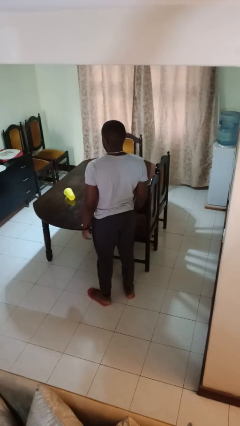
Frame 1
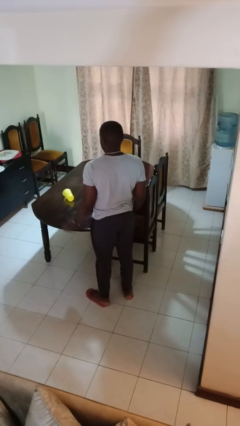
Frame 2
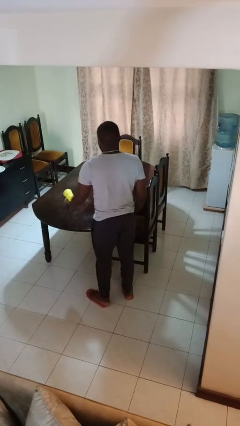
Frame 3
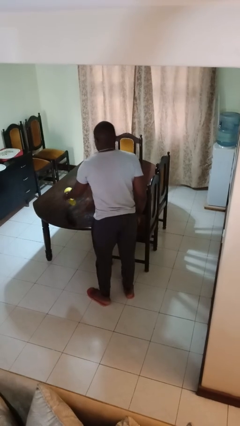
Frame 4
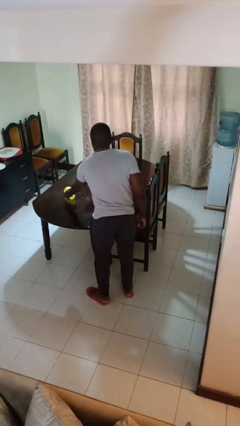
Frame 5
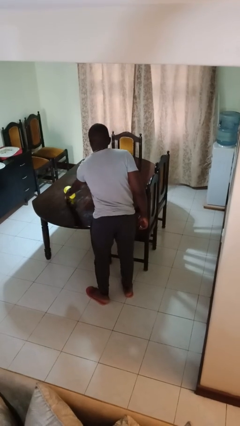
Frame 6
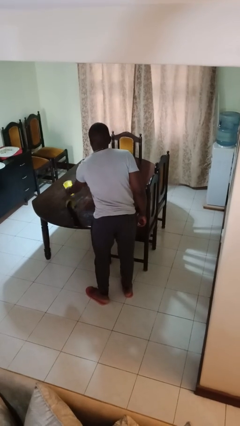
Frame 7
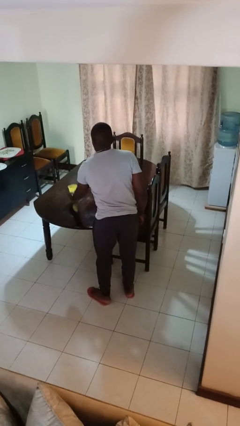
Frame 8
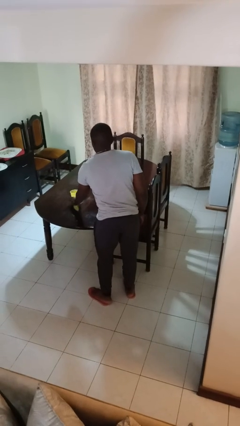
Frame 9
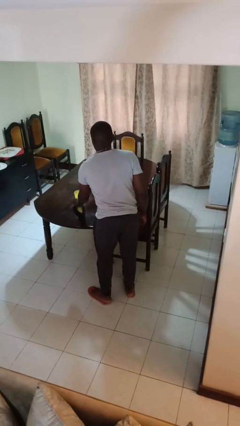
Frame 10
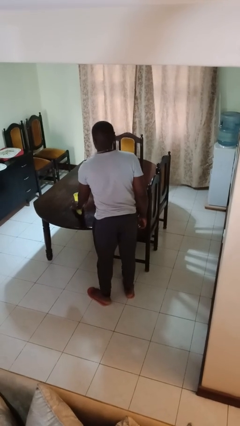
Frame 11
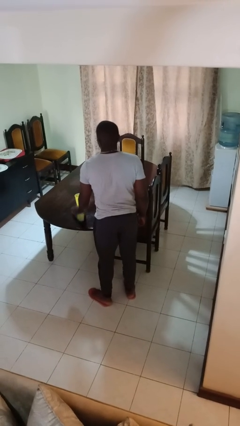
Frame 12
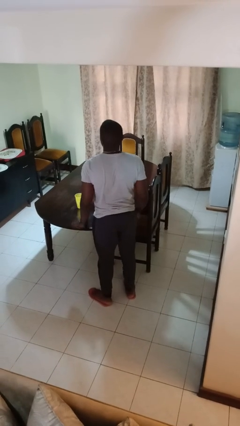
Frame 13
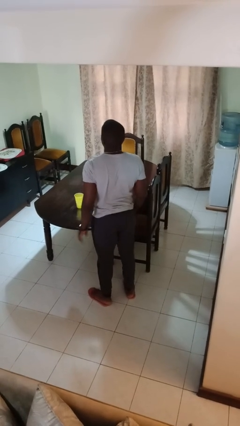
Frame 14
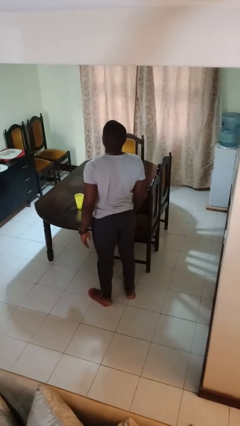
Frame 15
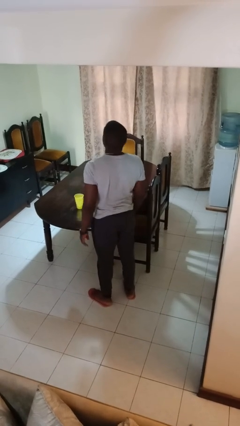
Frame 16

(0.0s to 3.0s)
person sets upright glass

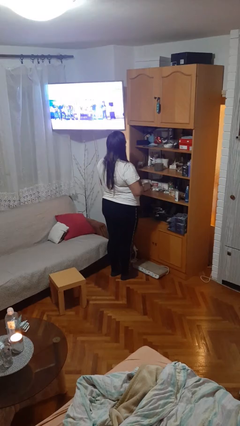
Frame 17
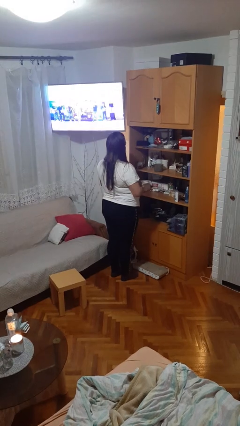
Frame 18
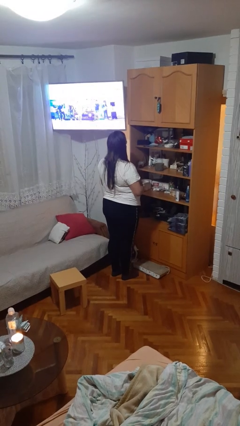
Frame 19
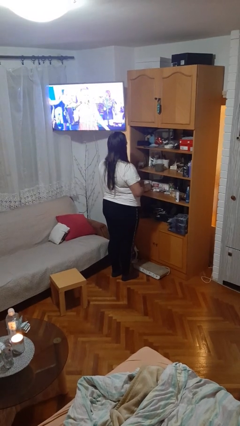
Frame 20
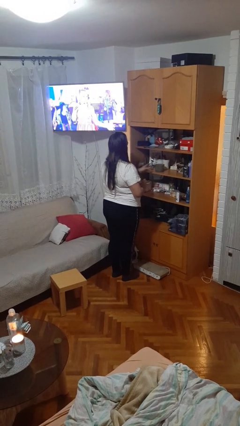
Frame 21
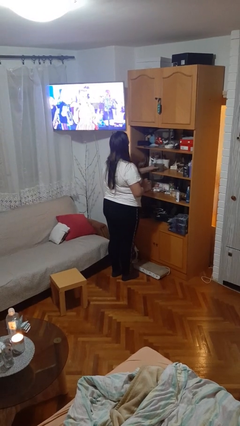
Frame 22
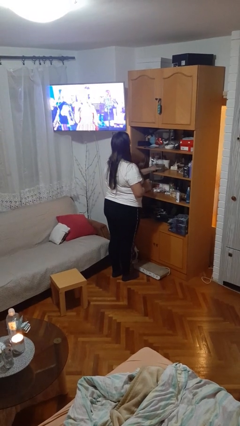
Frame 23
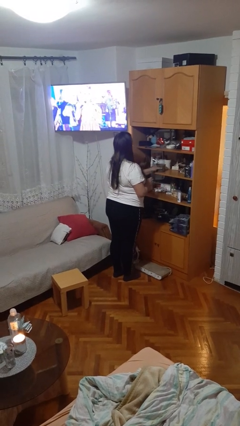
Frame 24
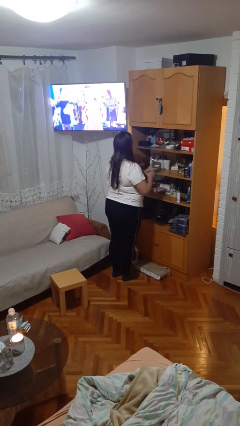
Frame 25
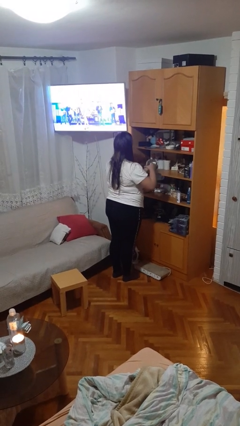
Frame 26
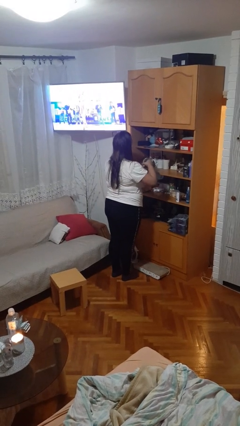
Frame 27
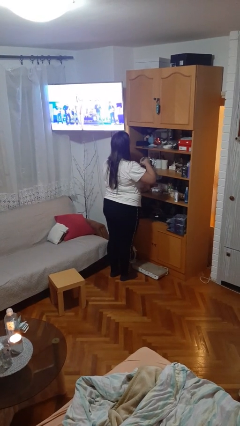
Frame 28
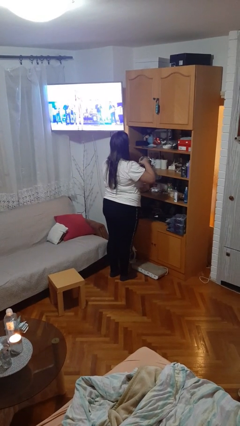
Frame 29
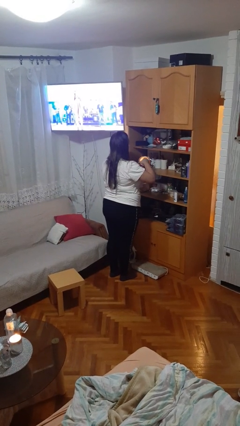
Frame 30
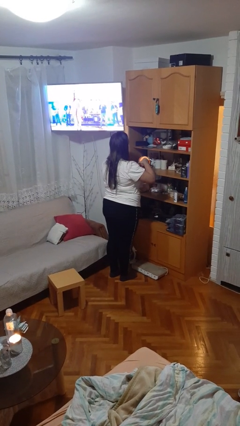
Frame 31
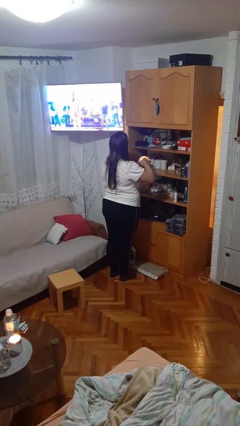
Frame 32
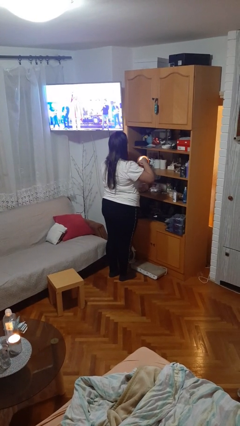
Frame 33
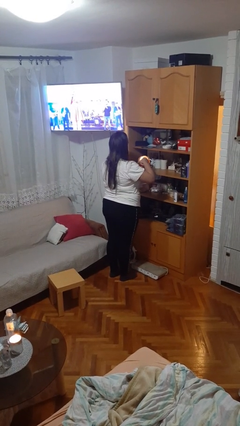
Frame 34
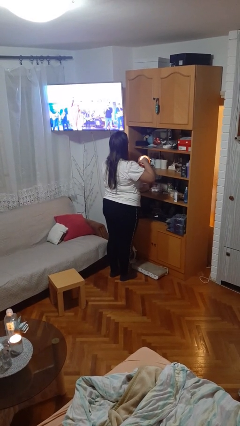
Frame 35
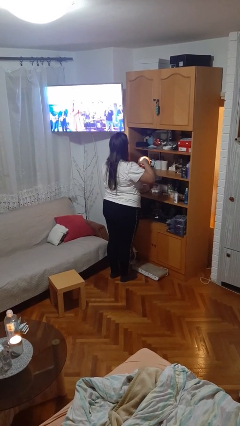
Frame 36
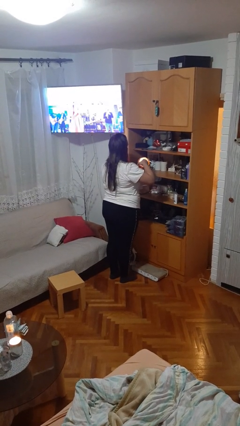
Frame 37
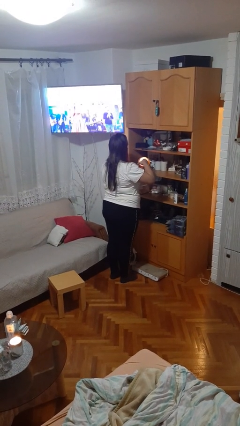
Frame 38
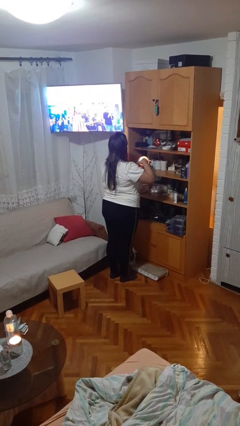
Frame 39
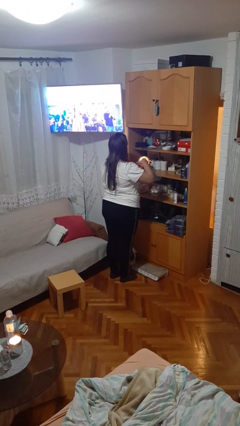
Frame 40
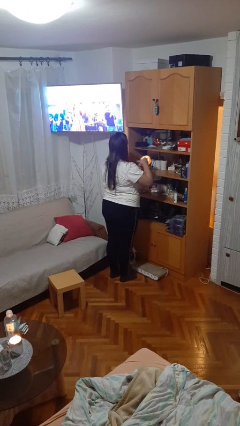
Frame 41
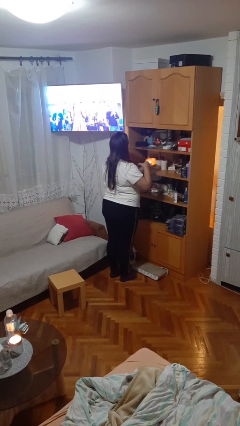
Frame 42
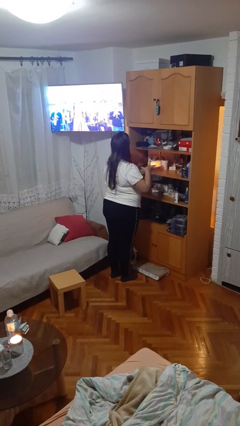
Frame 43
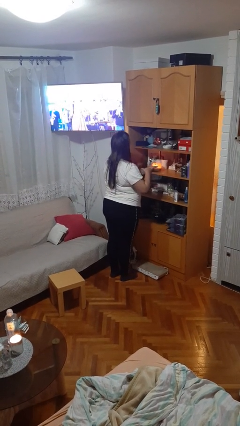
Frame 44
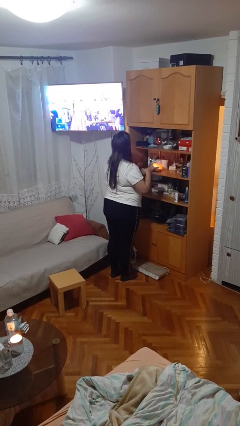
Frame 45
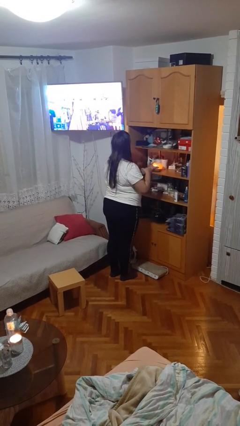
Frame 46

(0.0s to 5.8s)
person lights candle

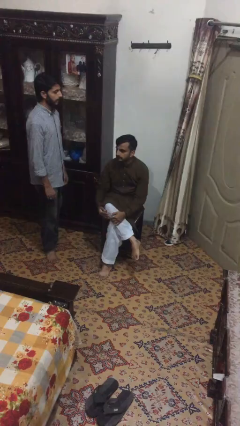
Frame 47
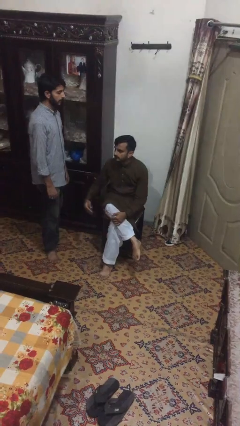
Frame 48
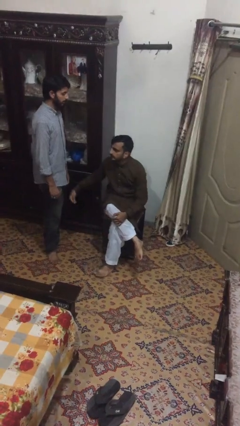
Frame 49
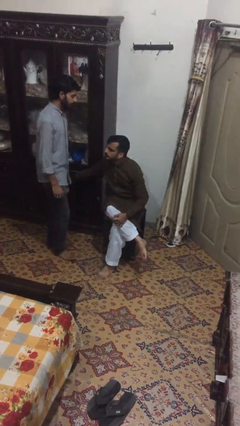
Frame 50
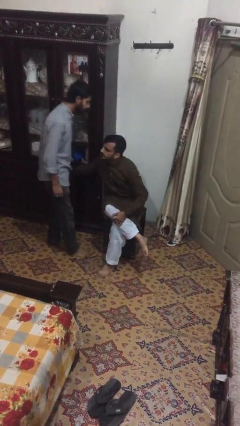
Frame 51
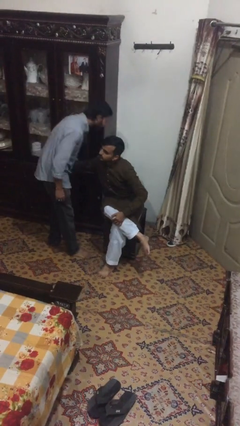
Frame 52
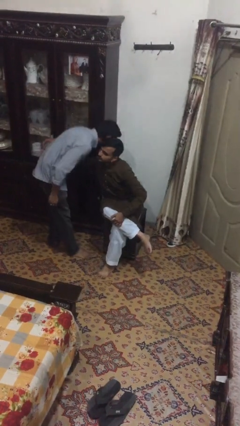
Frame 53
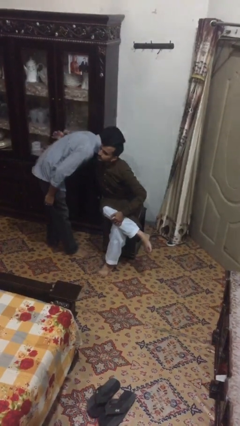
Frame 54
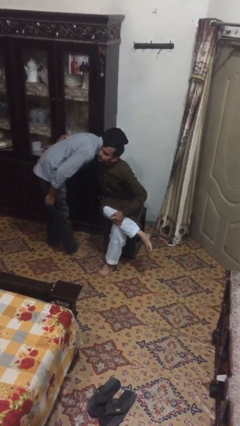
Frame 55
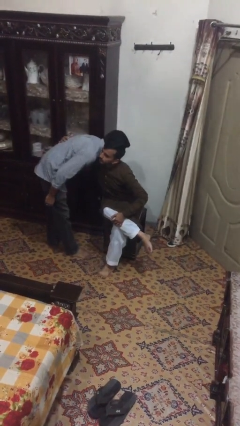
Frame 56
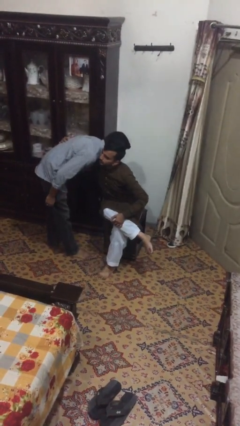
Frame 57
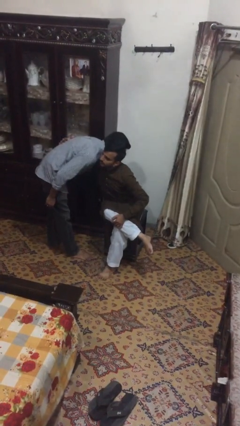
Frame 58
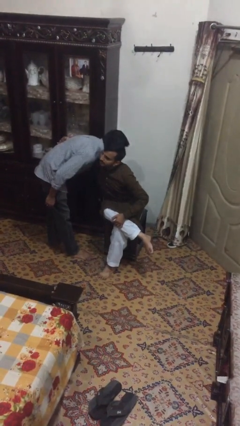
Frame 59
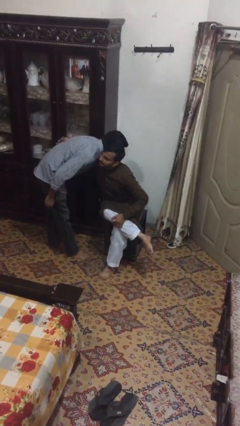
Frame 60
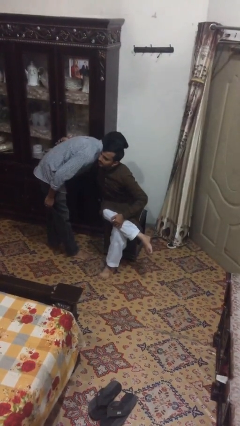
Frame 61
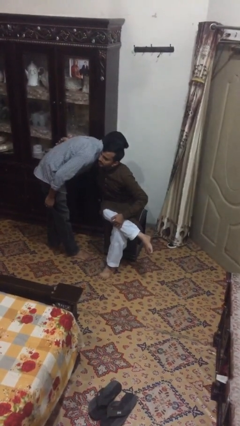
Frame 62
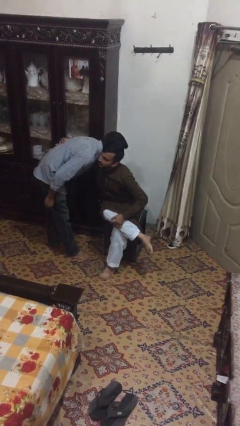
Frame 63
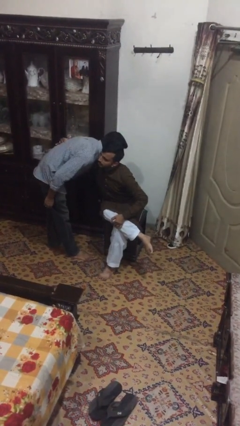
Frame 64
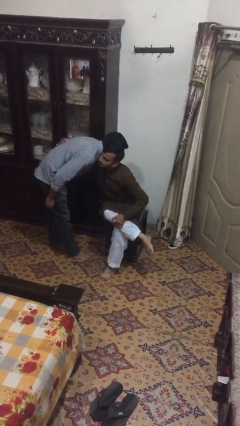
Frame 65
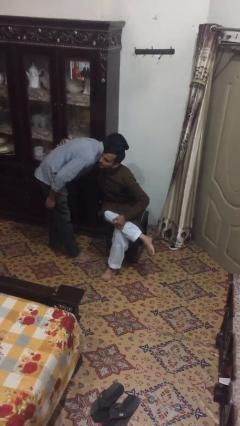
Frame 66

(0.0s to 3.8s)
person embraces person

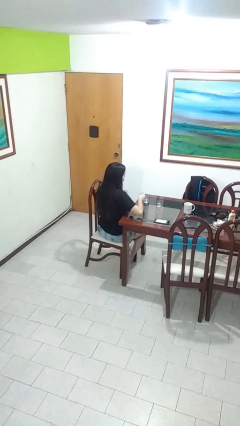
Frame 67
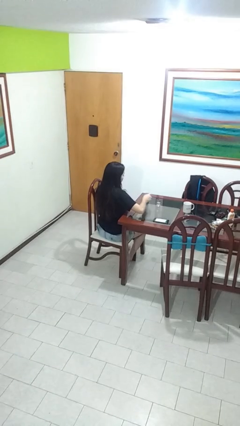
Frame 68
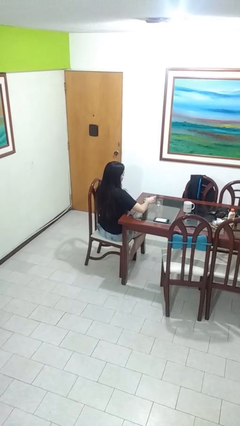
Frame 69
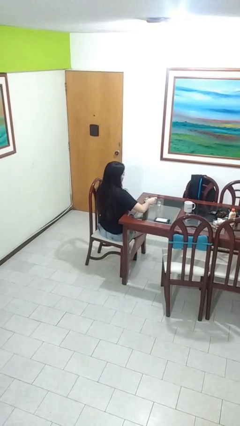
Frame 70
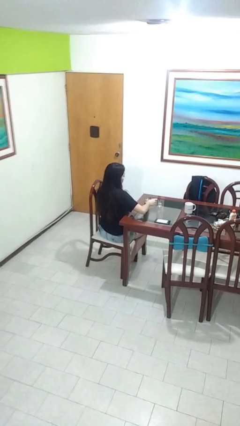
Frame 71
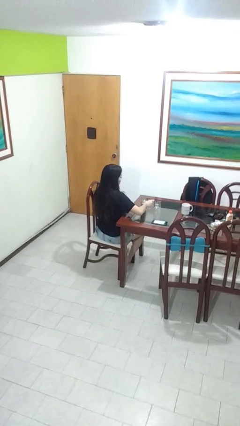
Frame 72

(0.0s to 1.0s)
person puts down object on table

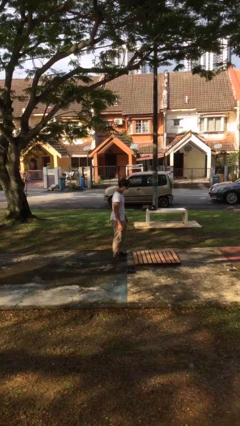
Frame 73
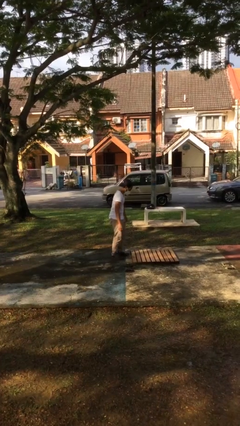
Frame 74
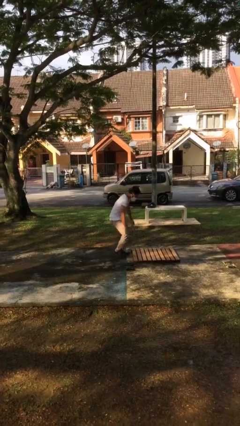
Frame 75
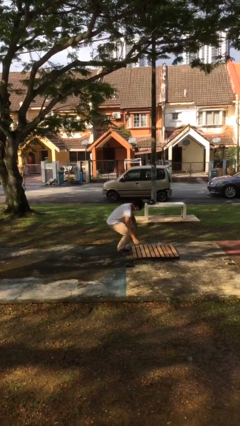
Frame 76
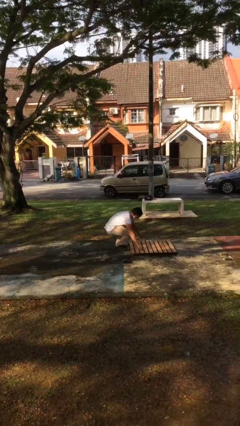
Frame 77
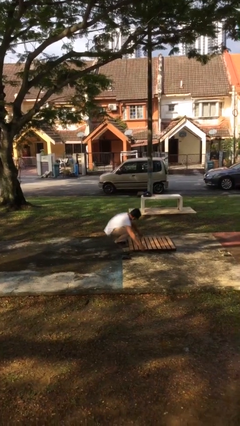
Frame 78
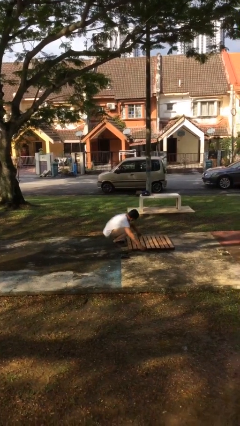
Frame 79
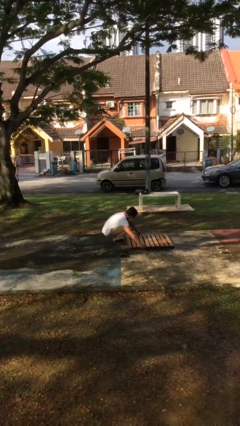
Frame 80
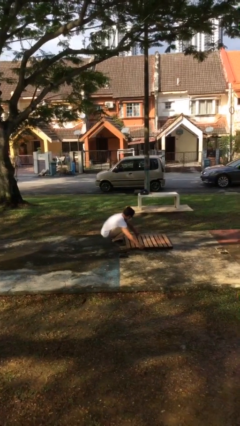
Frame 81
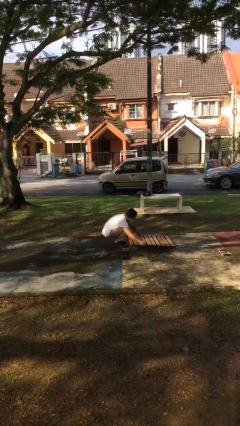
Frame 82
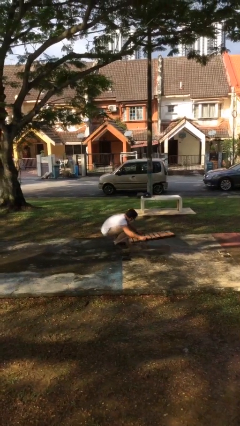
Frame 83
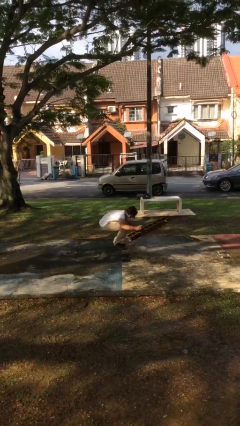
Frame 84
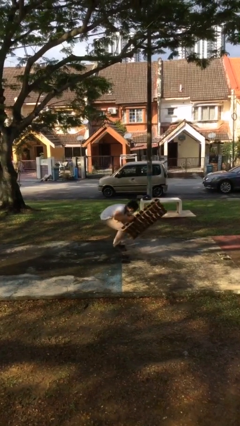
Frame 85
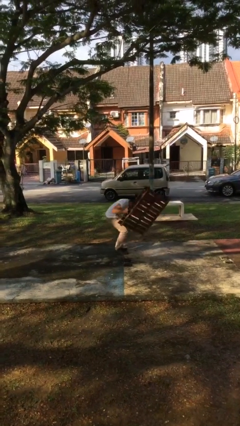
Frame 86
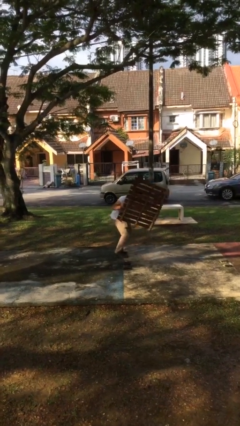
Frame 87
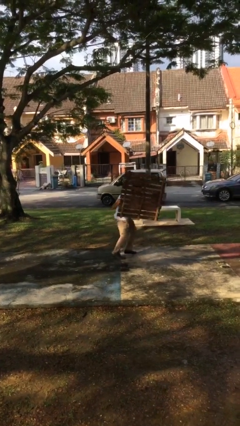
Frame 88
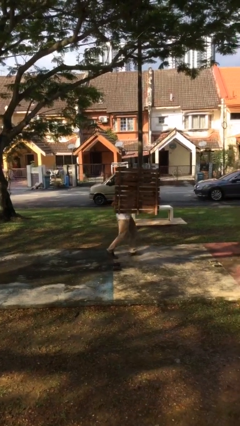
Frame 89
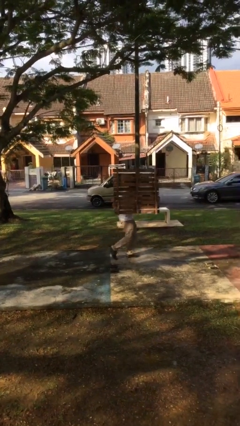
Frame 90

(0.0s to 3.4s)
person picks up object from floor

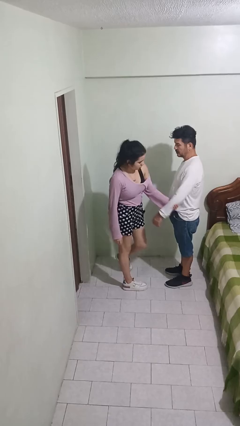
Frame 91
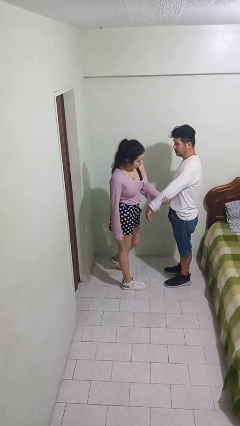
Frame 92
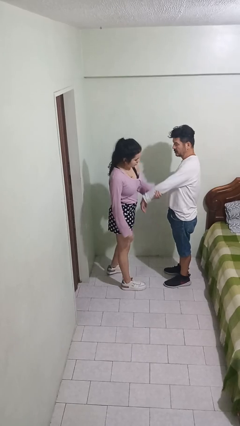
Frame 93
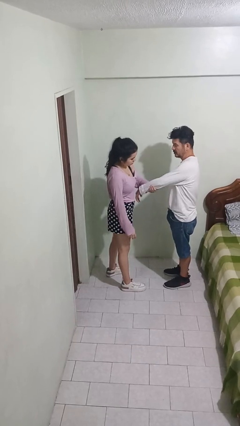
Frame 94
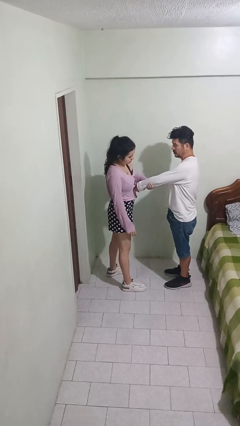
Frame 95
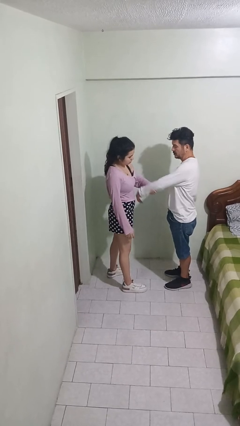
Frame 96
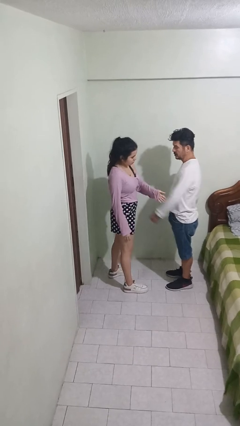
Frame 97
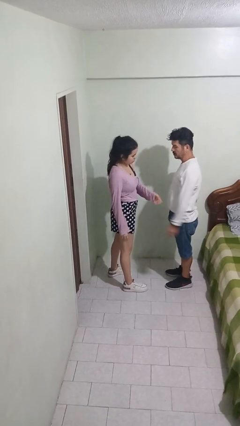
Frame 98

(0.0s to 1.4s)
person grabs person by forearm
